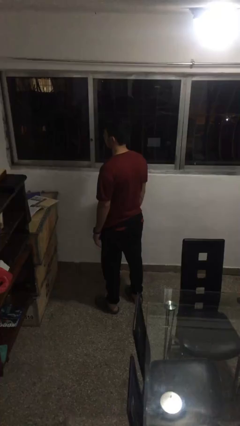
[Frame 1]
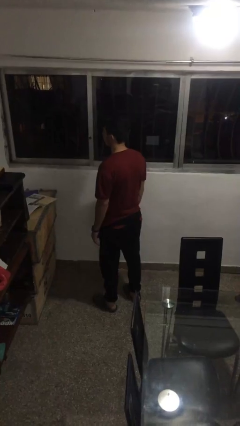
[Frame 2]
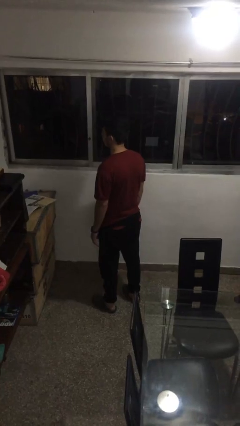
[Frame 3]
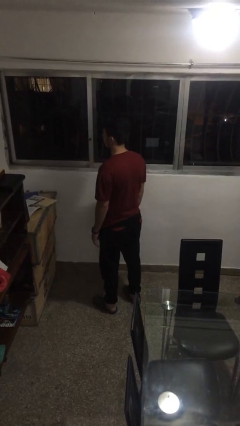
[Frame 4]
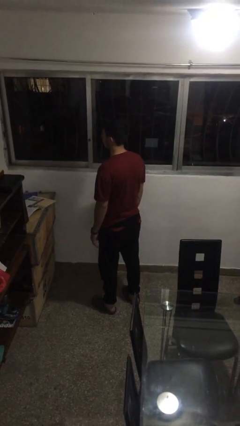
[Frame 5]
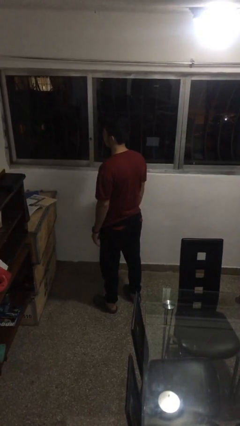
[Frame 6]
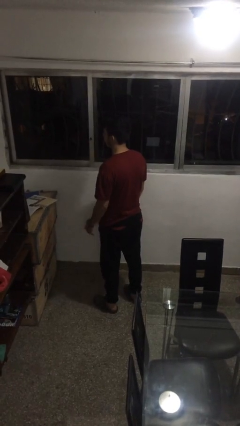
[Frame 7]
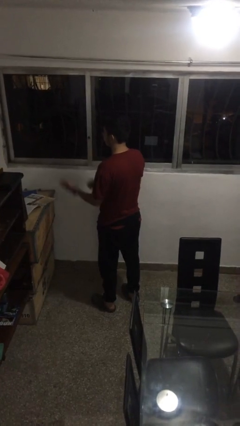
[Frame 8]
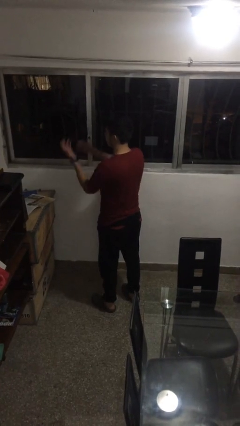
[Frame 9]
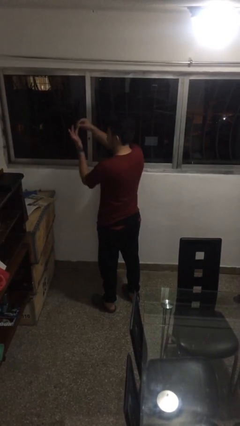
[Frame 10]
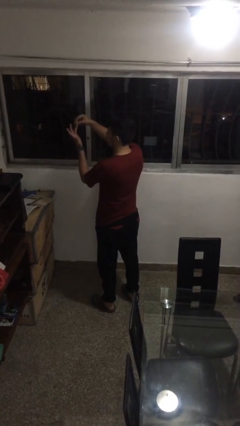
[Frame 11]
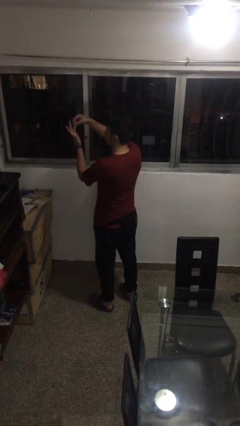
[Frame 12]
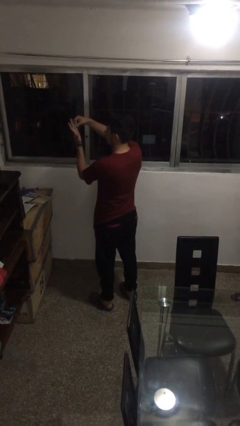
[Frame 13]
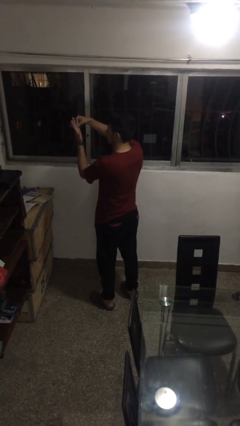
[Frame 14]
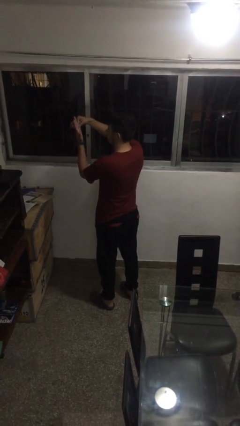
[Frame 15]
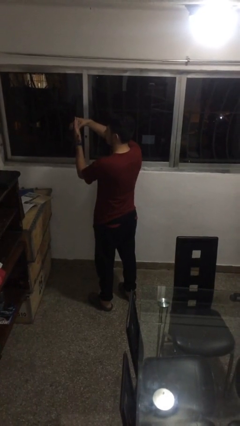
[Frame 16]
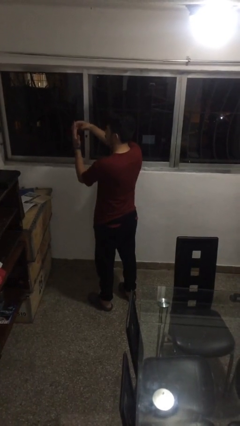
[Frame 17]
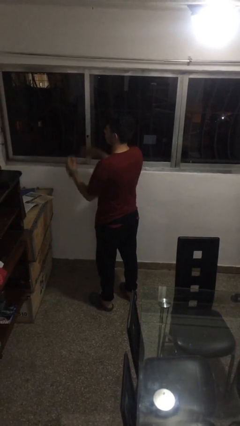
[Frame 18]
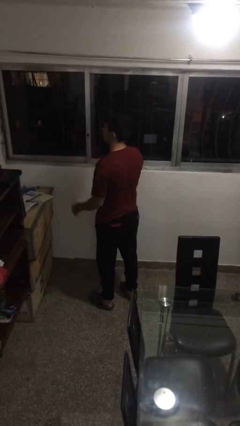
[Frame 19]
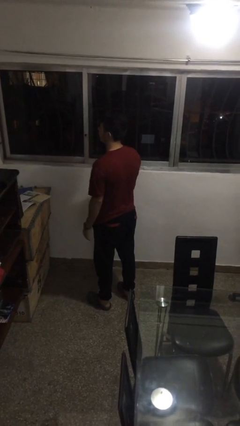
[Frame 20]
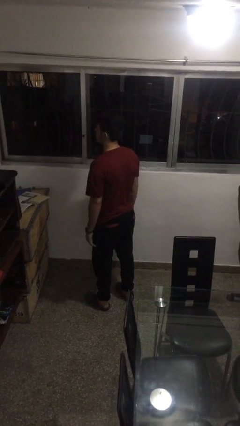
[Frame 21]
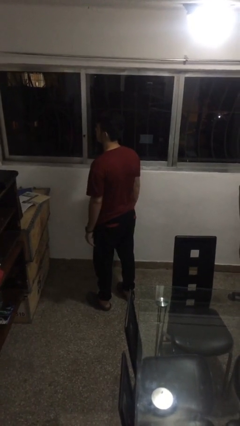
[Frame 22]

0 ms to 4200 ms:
person puts on ring

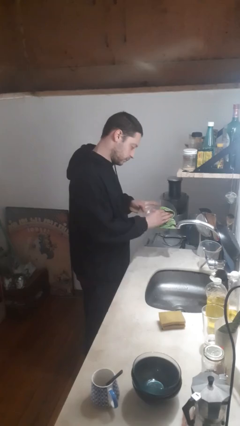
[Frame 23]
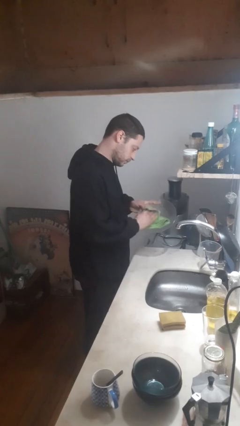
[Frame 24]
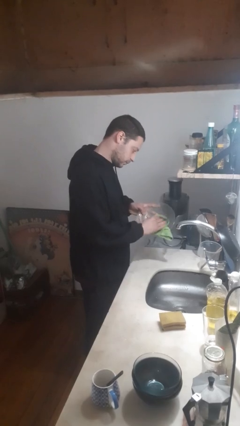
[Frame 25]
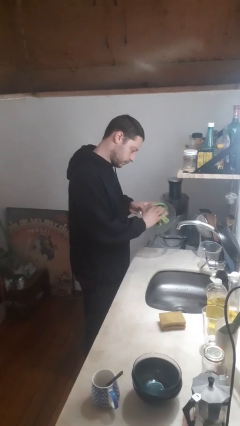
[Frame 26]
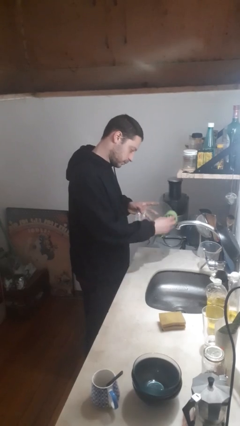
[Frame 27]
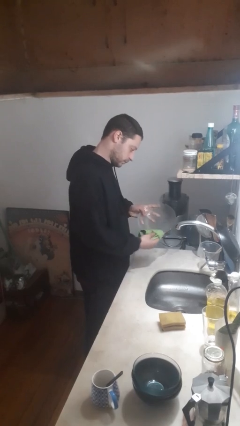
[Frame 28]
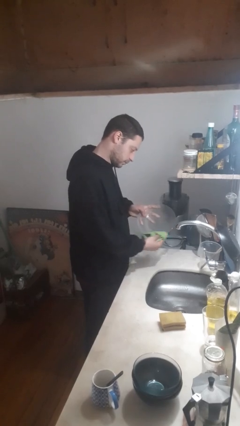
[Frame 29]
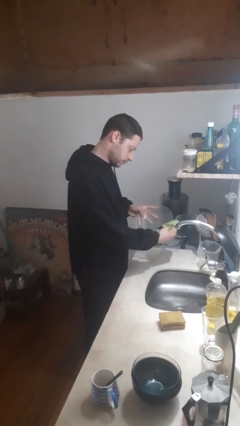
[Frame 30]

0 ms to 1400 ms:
person dries dish

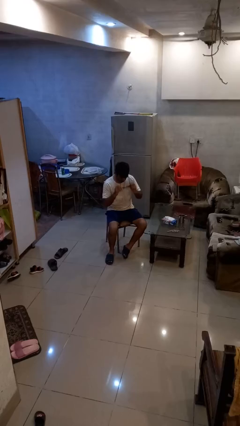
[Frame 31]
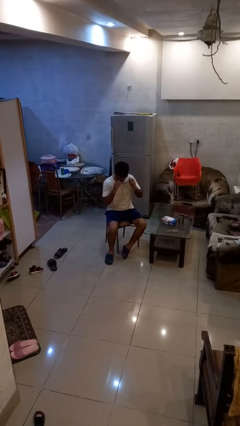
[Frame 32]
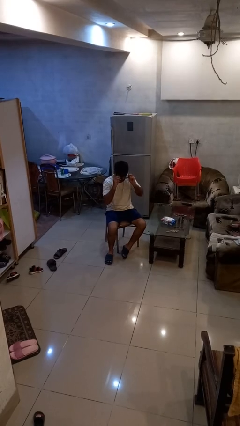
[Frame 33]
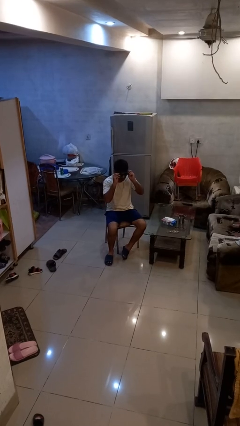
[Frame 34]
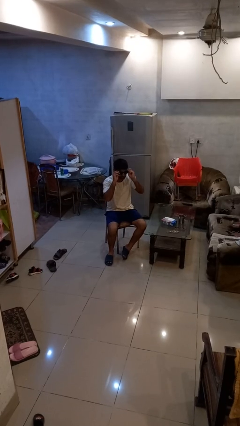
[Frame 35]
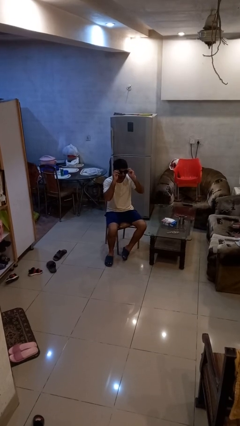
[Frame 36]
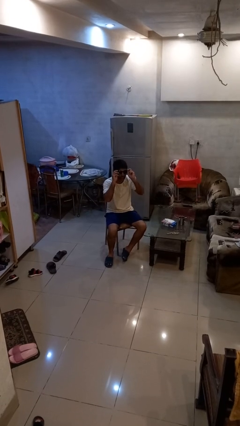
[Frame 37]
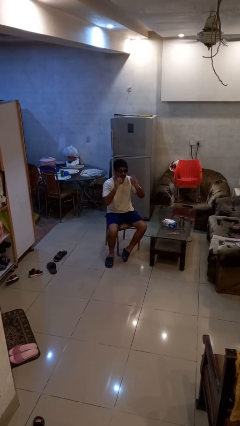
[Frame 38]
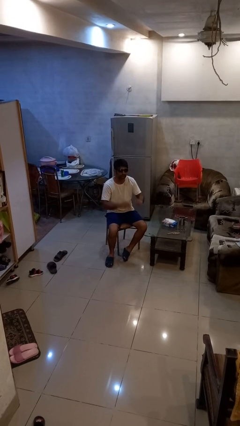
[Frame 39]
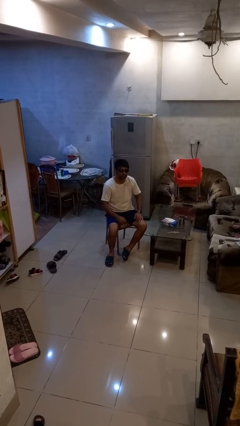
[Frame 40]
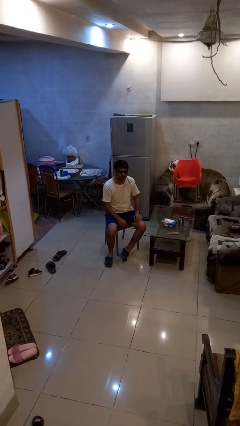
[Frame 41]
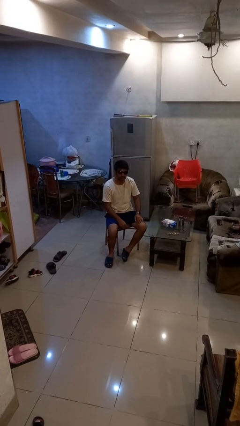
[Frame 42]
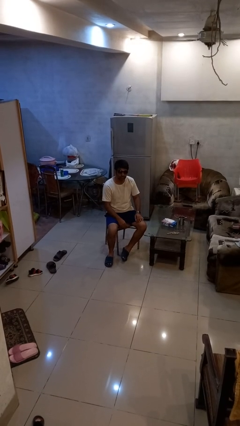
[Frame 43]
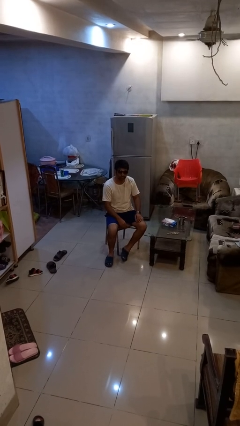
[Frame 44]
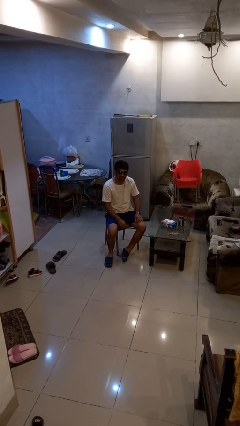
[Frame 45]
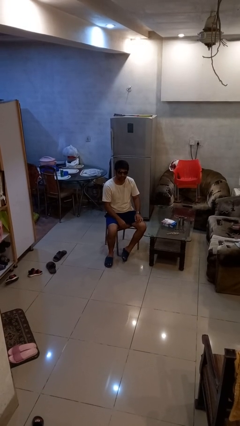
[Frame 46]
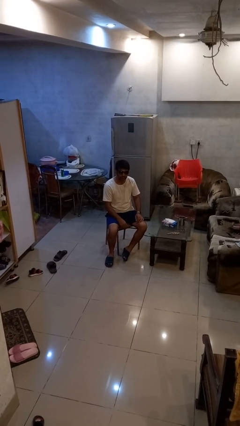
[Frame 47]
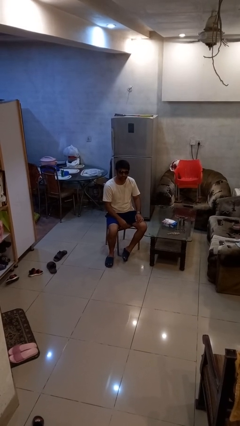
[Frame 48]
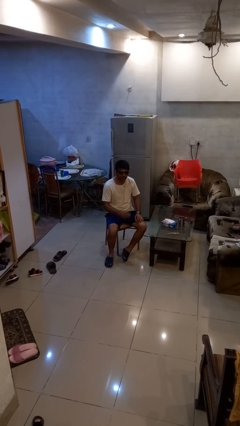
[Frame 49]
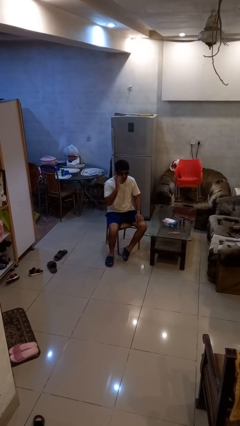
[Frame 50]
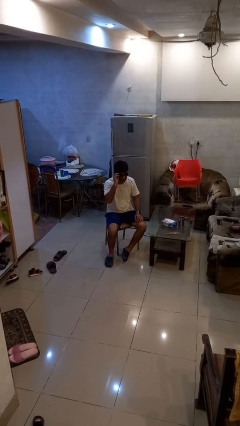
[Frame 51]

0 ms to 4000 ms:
person puts on sunglasses

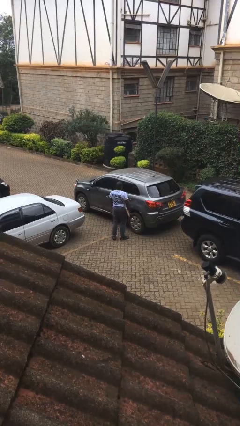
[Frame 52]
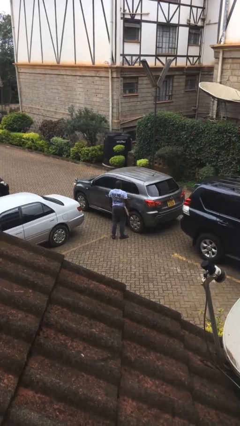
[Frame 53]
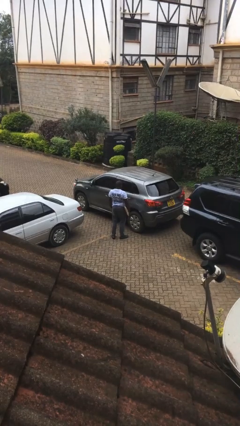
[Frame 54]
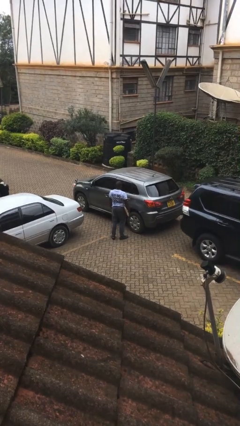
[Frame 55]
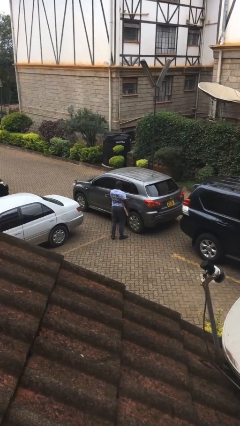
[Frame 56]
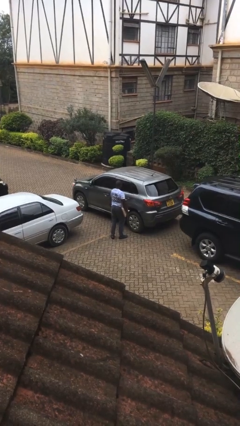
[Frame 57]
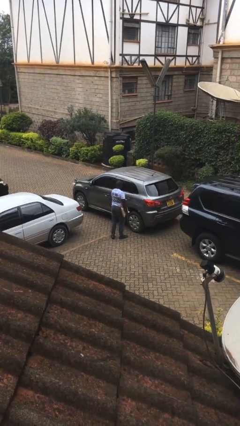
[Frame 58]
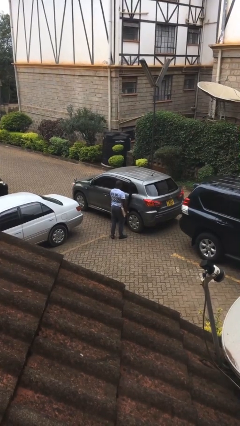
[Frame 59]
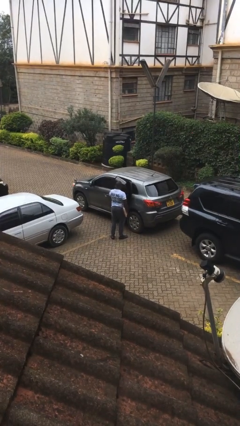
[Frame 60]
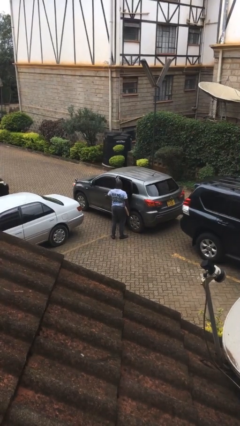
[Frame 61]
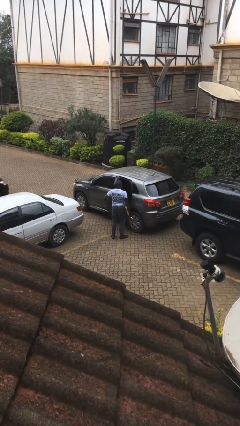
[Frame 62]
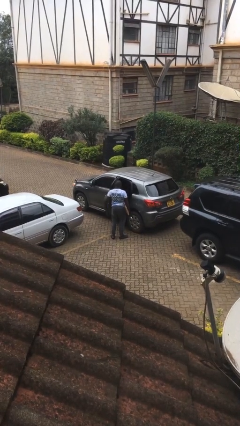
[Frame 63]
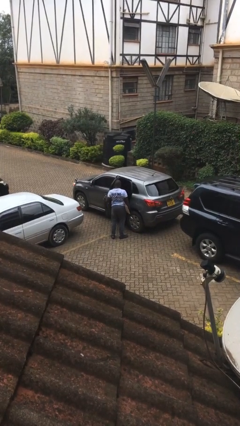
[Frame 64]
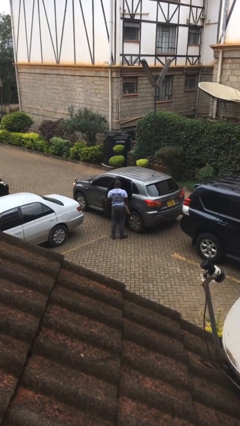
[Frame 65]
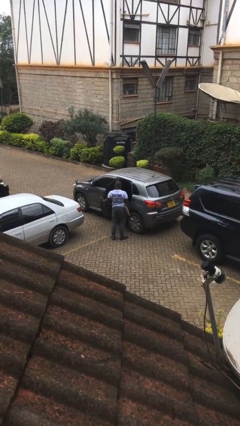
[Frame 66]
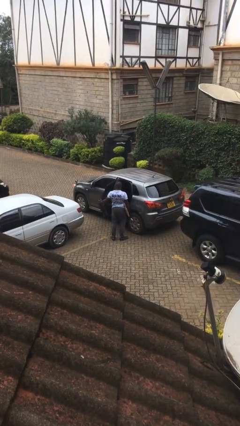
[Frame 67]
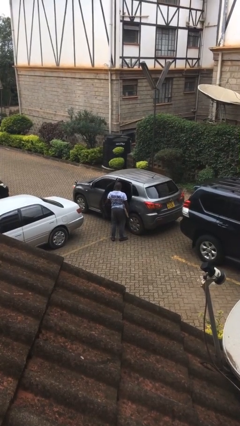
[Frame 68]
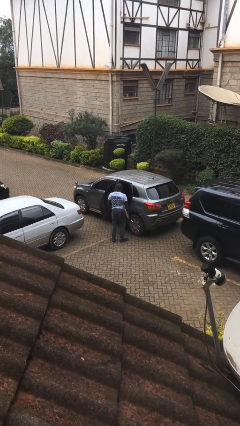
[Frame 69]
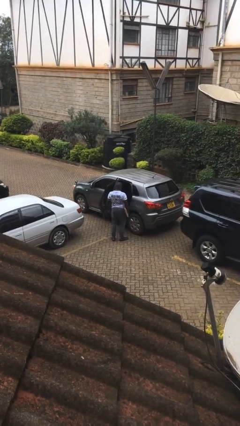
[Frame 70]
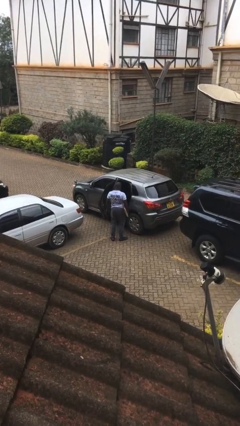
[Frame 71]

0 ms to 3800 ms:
person opens car door

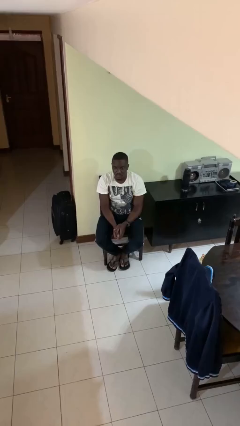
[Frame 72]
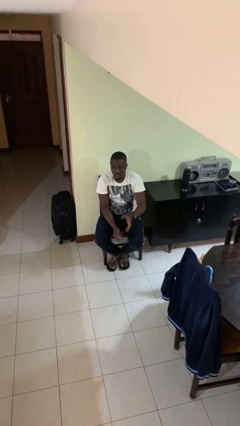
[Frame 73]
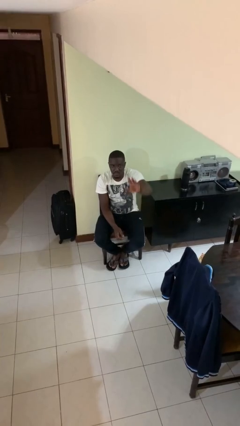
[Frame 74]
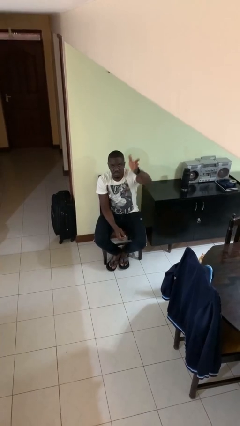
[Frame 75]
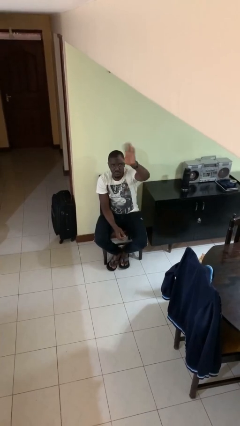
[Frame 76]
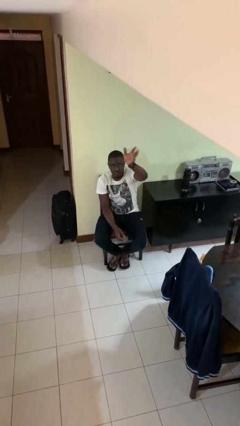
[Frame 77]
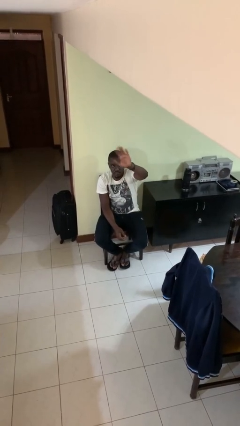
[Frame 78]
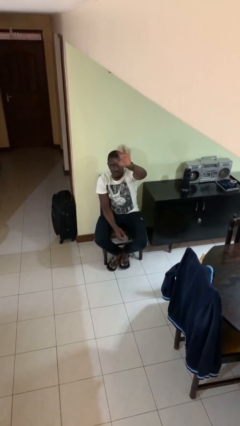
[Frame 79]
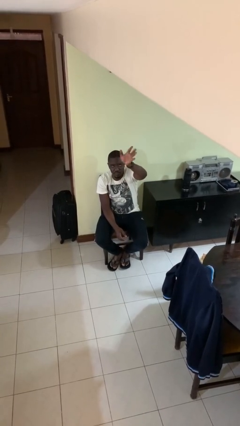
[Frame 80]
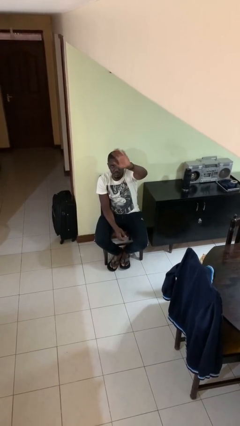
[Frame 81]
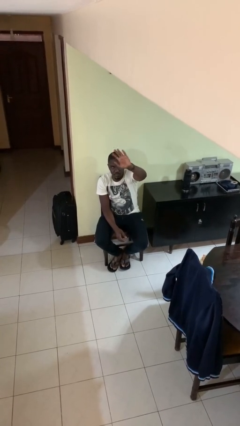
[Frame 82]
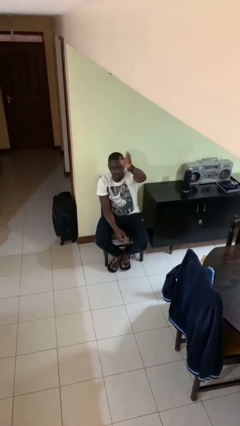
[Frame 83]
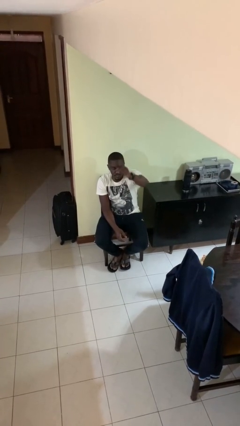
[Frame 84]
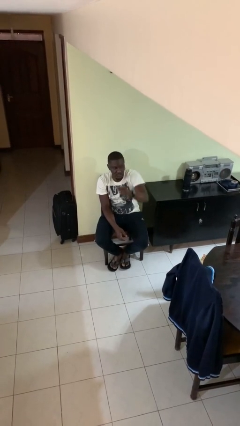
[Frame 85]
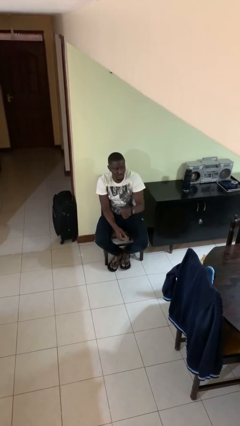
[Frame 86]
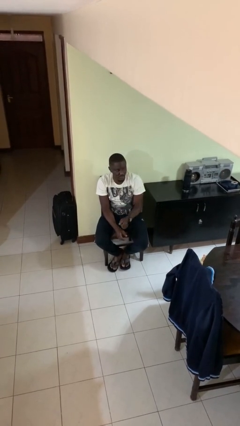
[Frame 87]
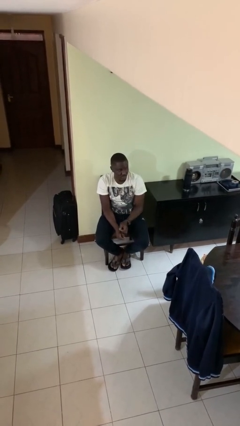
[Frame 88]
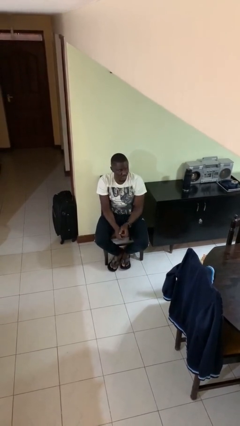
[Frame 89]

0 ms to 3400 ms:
person waves at person

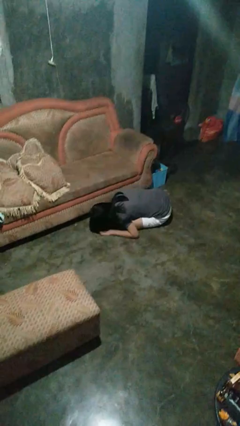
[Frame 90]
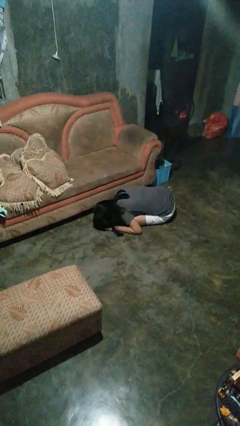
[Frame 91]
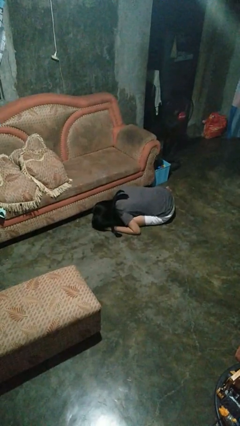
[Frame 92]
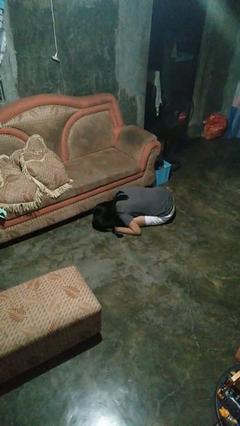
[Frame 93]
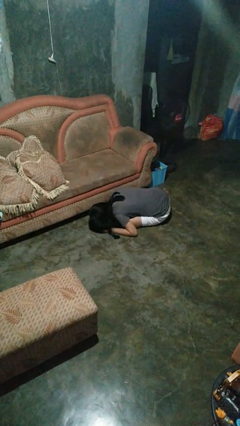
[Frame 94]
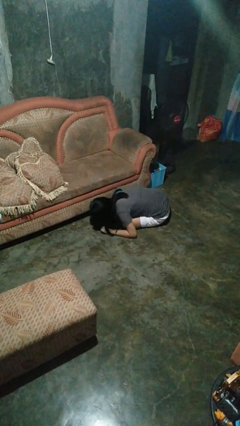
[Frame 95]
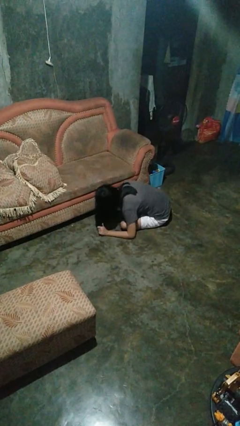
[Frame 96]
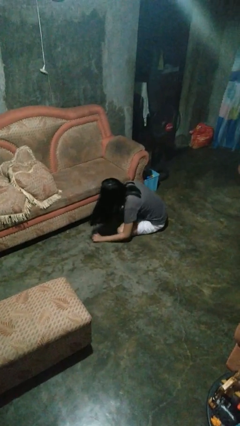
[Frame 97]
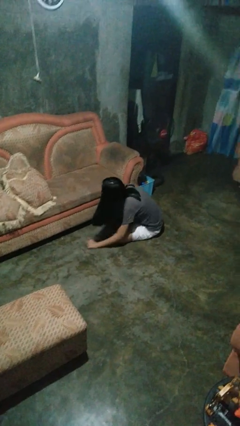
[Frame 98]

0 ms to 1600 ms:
person searches under couch
